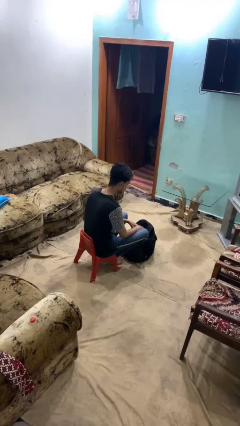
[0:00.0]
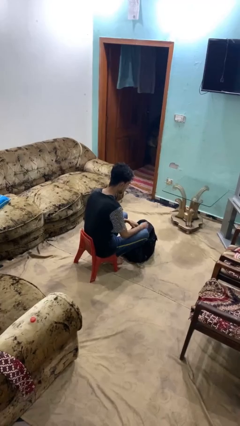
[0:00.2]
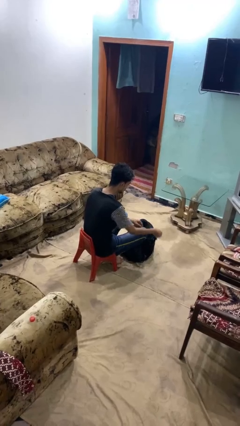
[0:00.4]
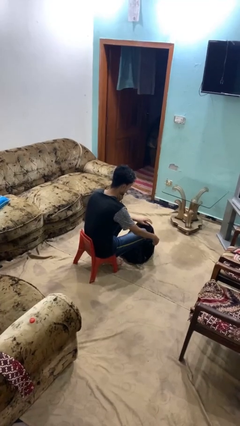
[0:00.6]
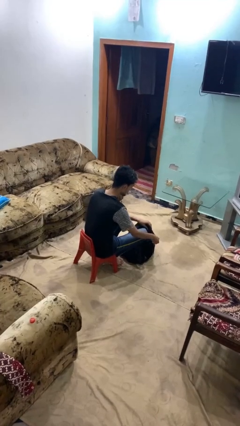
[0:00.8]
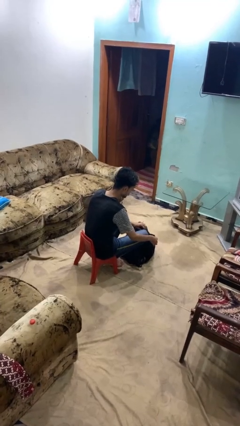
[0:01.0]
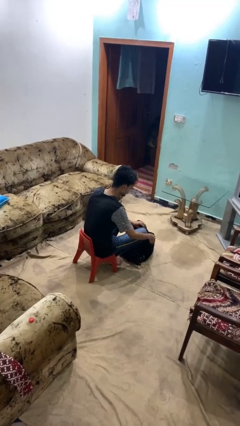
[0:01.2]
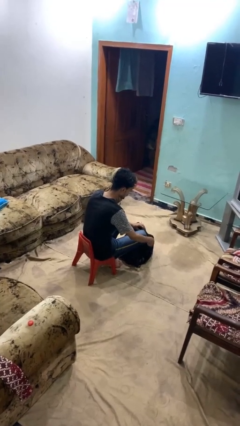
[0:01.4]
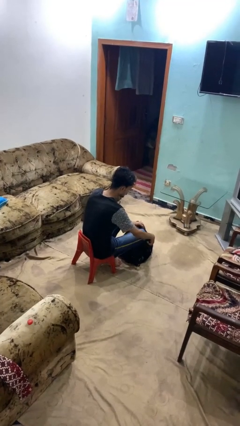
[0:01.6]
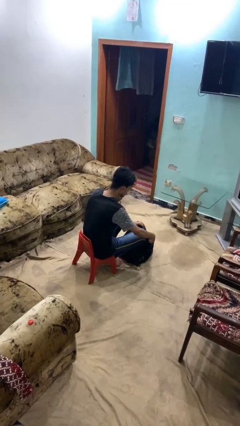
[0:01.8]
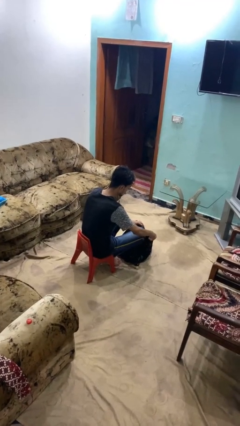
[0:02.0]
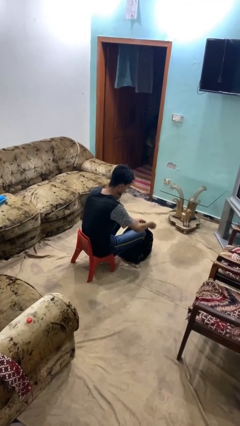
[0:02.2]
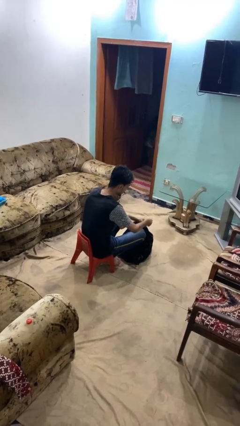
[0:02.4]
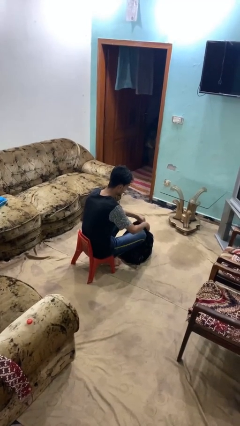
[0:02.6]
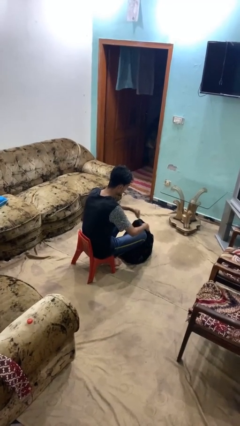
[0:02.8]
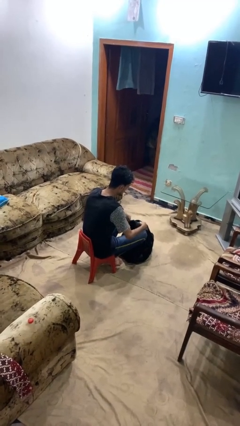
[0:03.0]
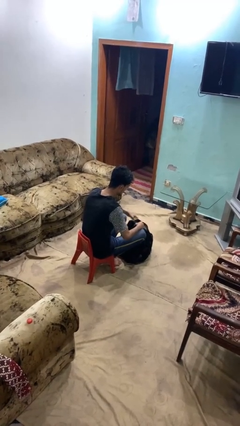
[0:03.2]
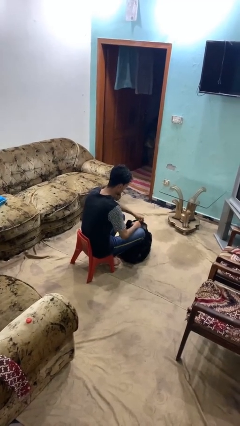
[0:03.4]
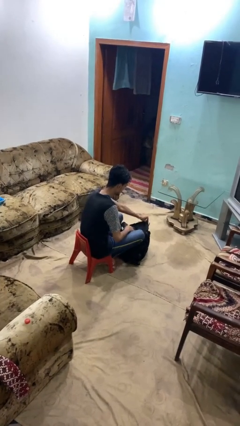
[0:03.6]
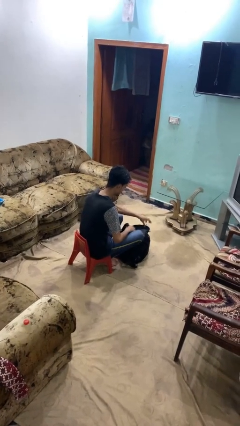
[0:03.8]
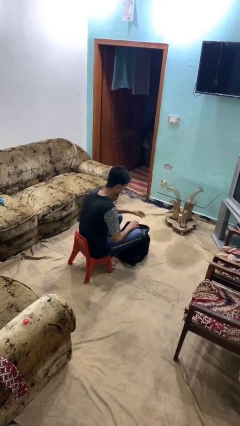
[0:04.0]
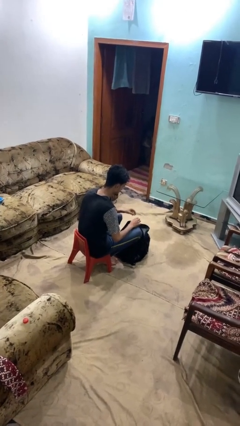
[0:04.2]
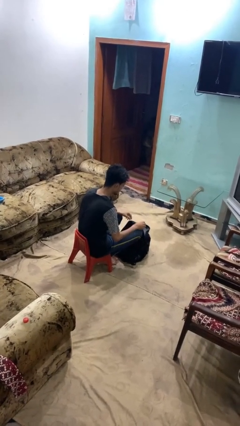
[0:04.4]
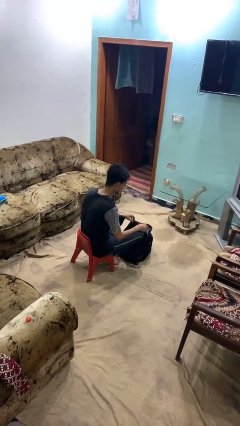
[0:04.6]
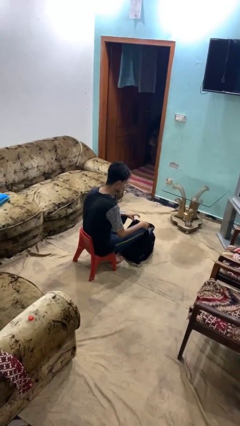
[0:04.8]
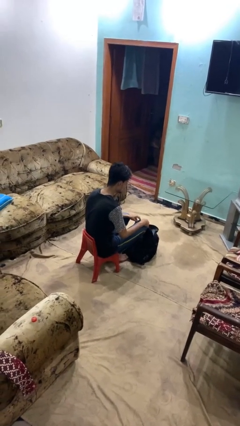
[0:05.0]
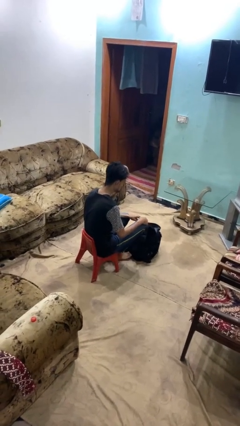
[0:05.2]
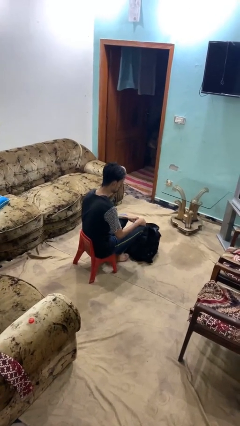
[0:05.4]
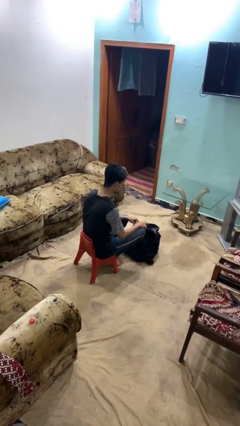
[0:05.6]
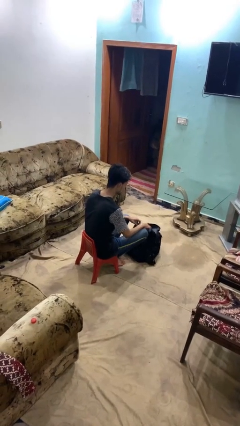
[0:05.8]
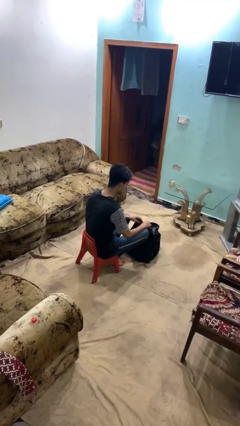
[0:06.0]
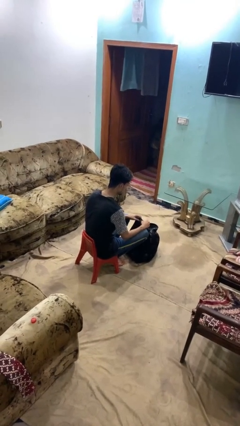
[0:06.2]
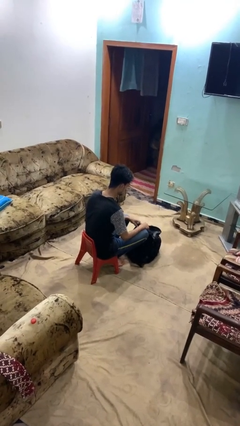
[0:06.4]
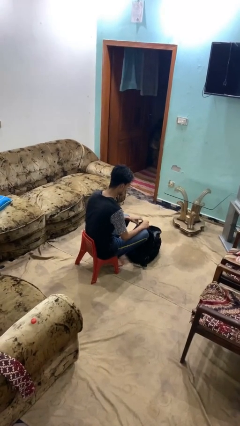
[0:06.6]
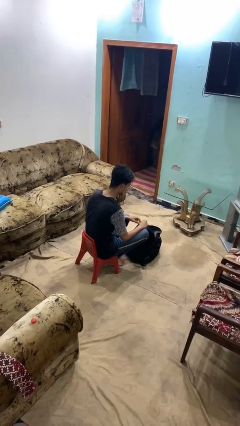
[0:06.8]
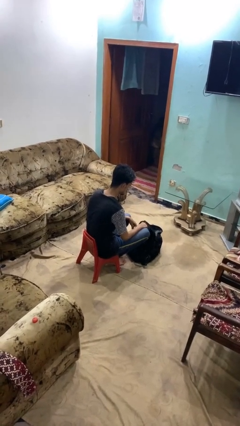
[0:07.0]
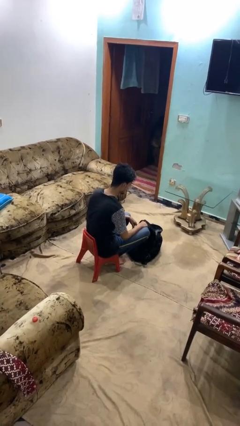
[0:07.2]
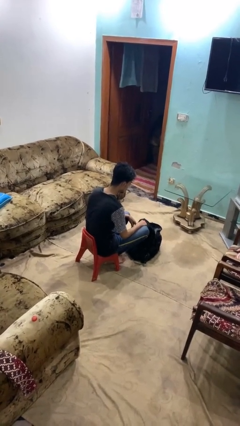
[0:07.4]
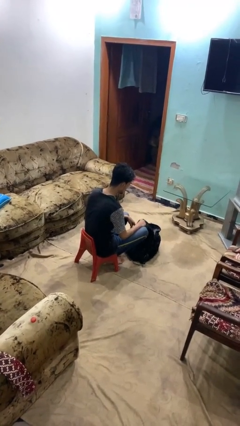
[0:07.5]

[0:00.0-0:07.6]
person puts on backpack

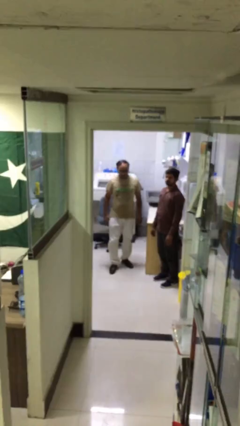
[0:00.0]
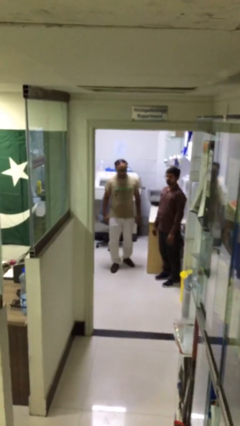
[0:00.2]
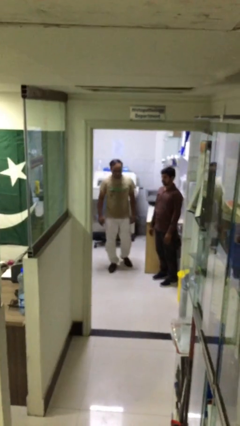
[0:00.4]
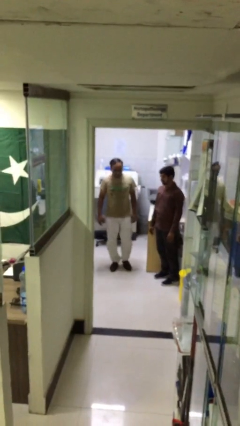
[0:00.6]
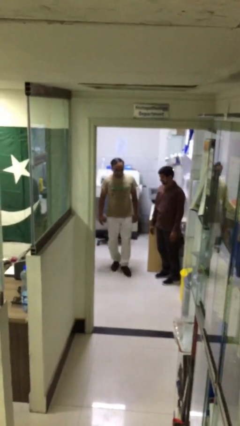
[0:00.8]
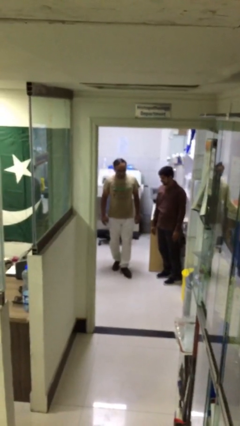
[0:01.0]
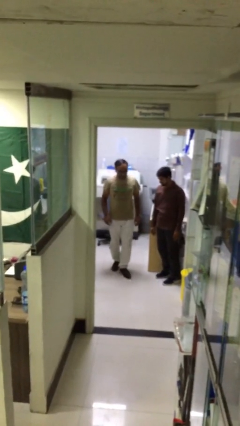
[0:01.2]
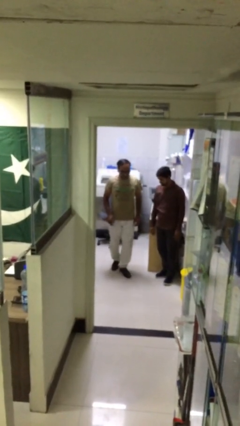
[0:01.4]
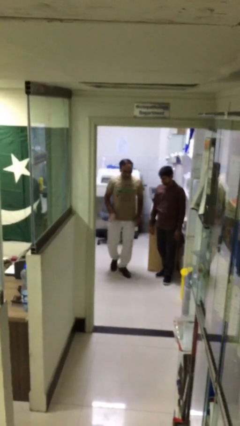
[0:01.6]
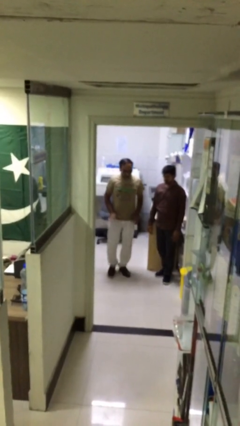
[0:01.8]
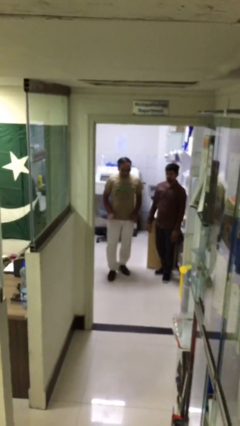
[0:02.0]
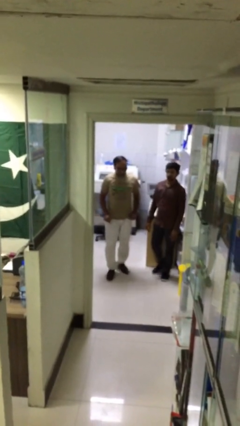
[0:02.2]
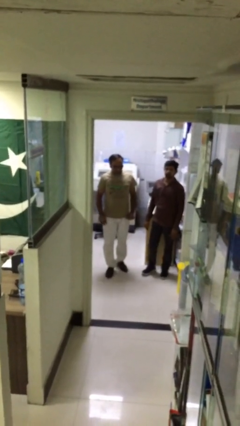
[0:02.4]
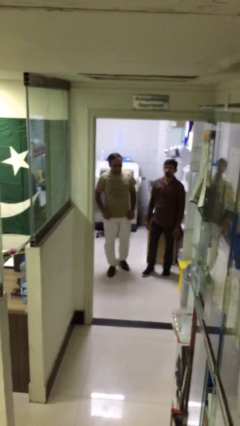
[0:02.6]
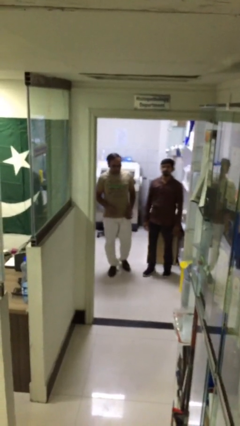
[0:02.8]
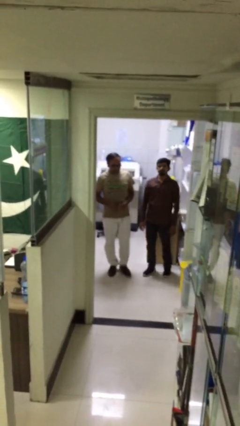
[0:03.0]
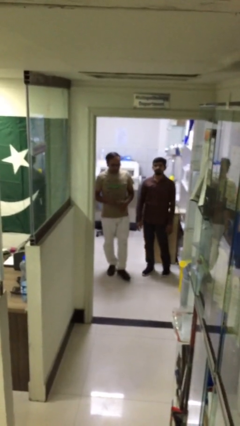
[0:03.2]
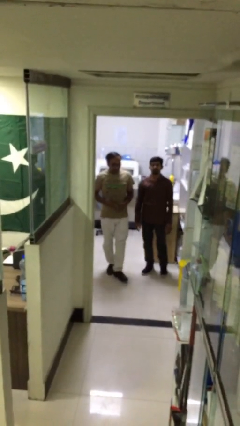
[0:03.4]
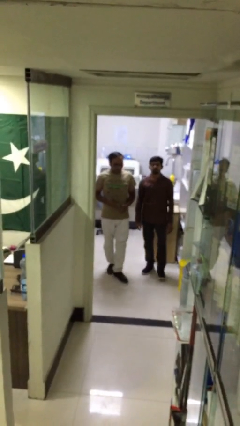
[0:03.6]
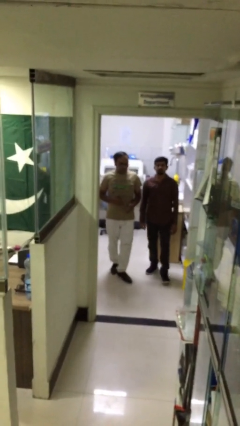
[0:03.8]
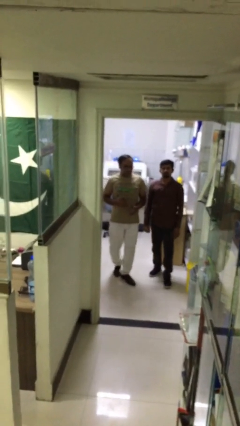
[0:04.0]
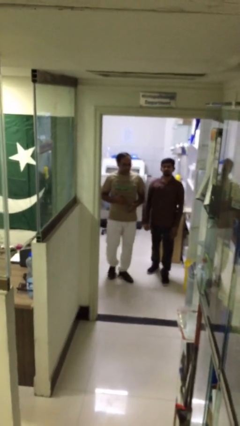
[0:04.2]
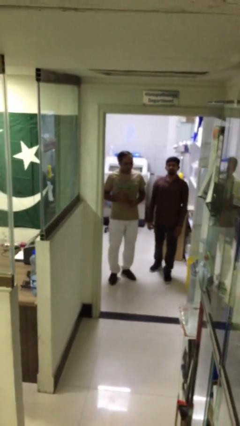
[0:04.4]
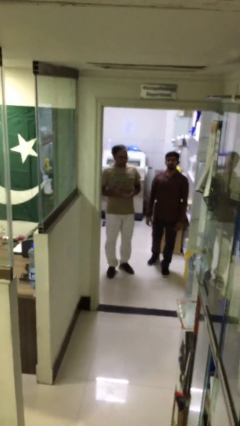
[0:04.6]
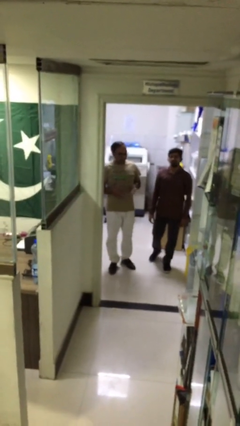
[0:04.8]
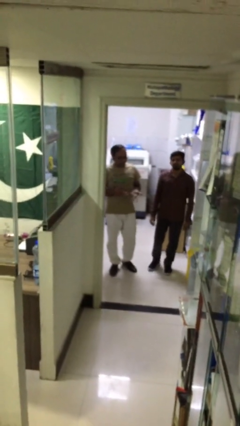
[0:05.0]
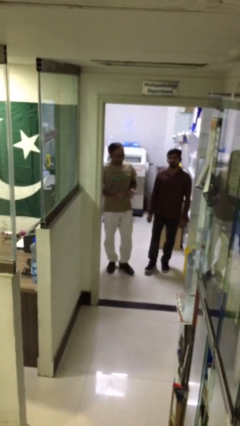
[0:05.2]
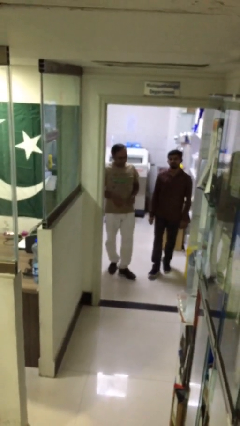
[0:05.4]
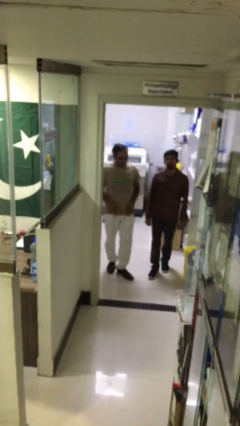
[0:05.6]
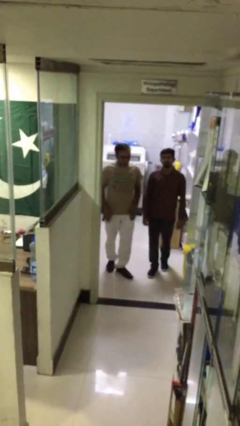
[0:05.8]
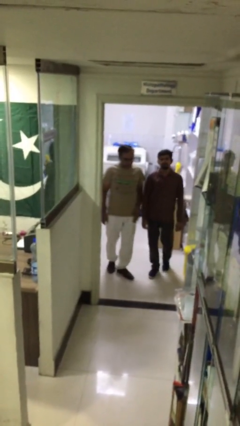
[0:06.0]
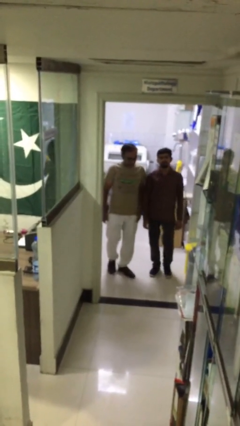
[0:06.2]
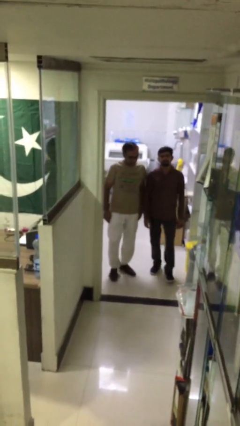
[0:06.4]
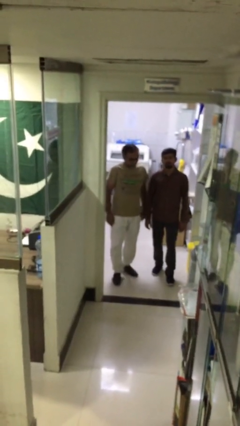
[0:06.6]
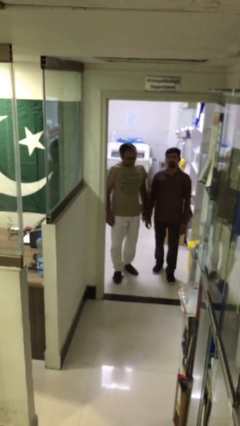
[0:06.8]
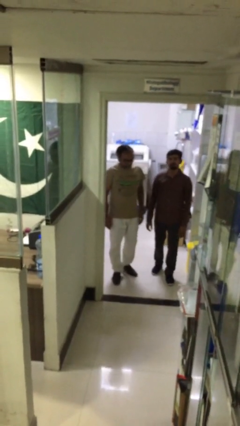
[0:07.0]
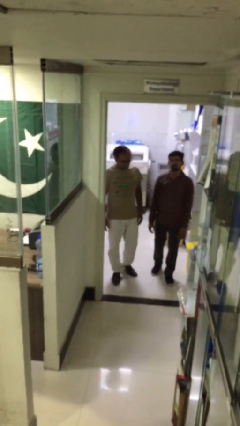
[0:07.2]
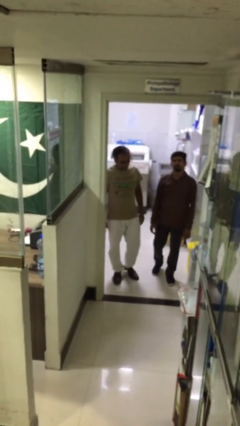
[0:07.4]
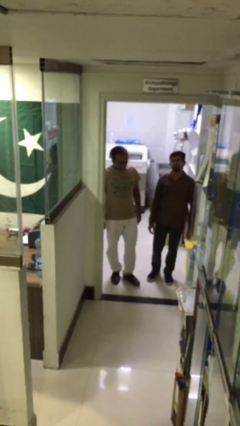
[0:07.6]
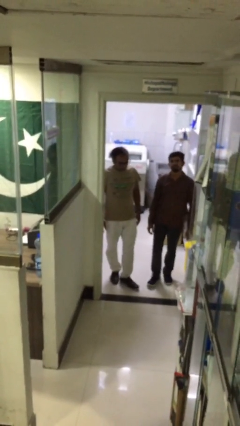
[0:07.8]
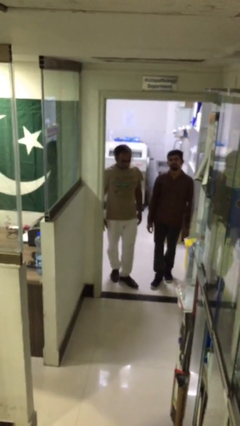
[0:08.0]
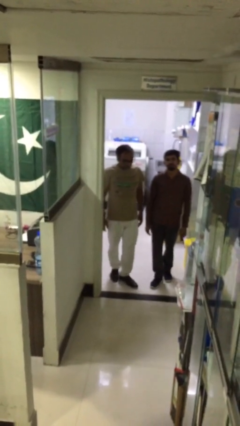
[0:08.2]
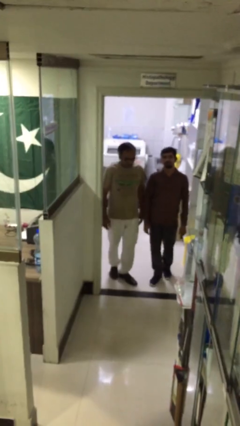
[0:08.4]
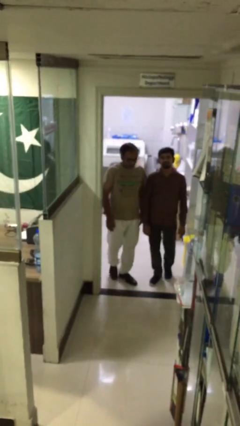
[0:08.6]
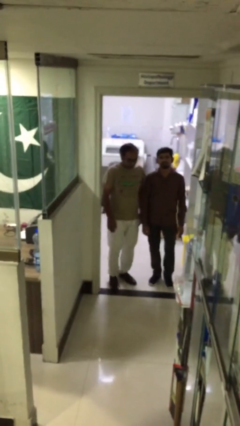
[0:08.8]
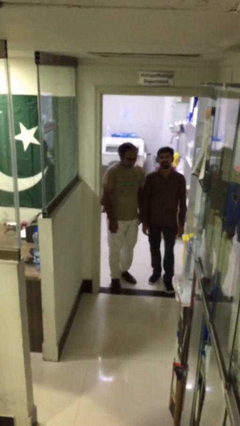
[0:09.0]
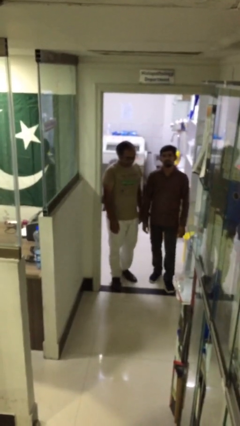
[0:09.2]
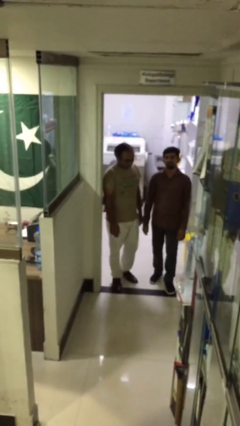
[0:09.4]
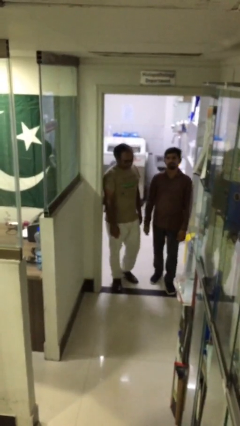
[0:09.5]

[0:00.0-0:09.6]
person talks to person

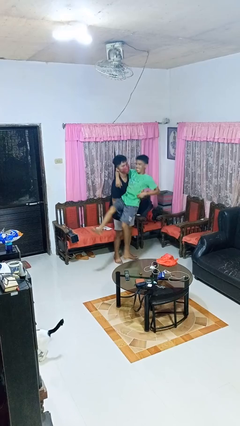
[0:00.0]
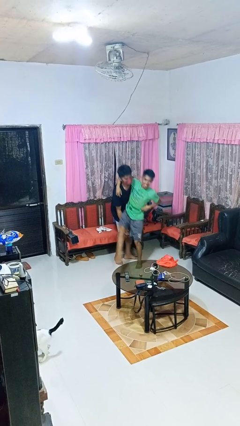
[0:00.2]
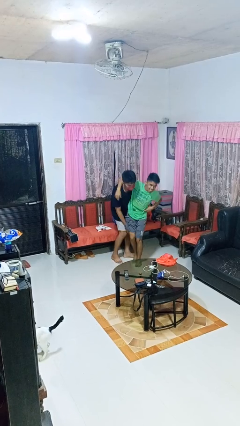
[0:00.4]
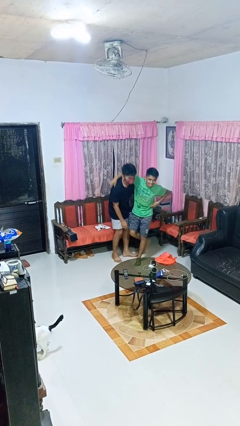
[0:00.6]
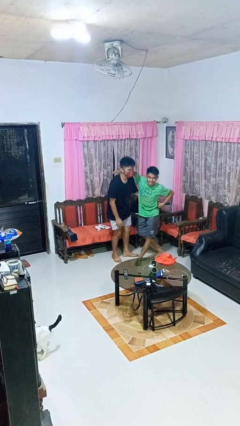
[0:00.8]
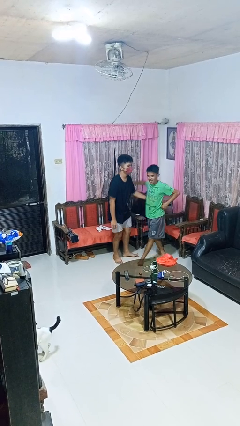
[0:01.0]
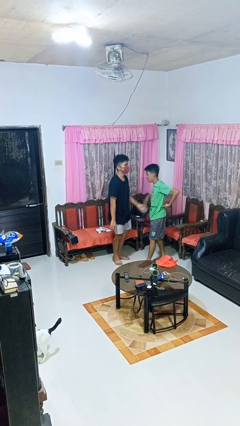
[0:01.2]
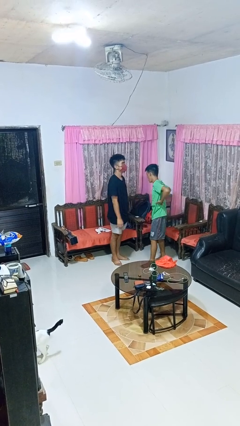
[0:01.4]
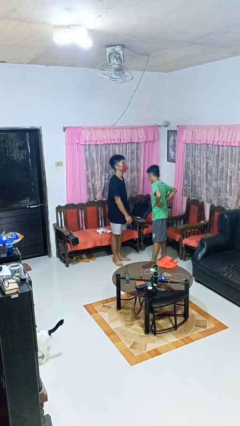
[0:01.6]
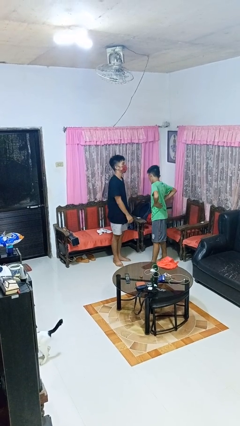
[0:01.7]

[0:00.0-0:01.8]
person puts down person
